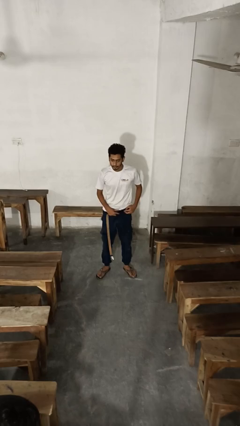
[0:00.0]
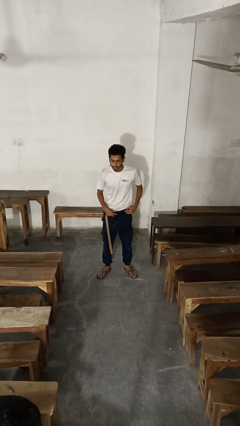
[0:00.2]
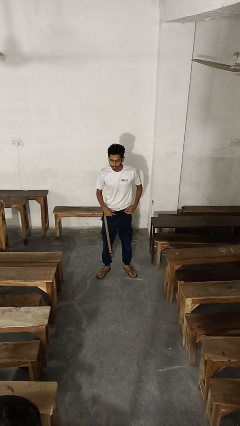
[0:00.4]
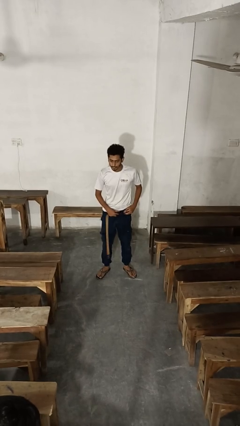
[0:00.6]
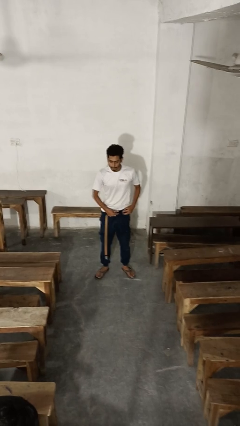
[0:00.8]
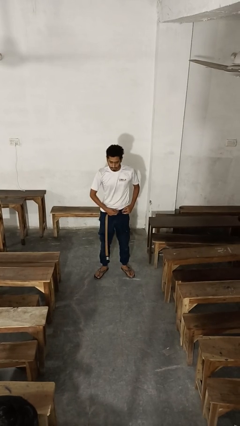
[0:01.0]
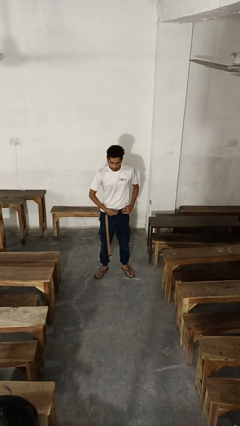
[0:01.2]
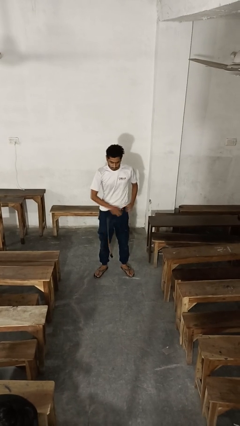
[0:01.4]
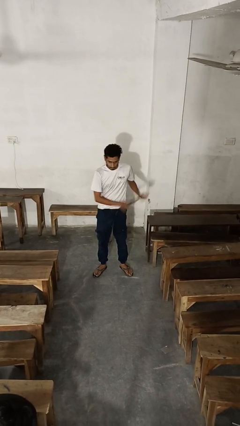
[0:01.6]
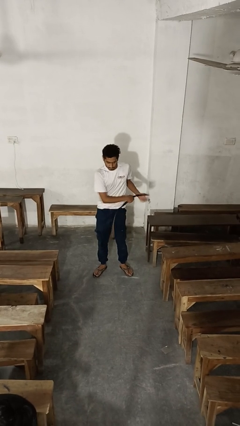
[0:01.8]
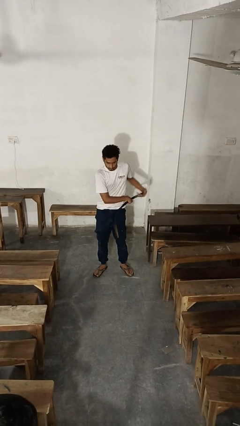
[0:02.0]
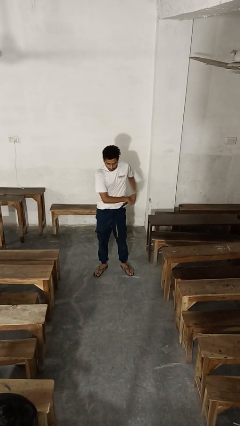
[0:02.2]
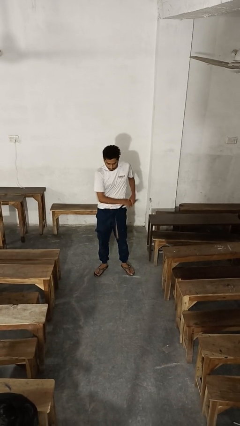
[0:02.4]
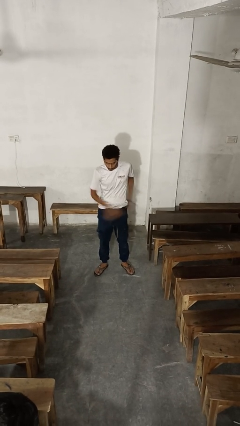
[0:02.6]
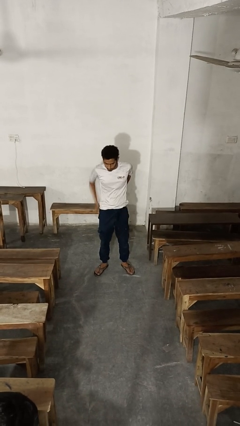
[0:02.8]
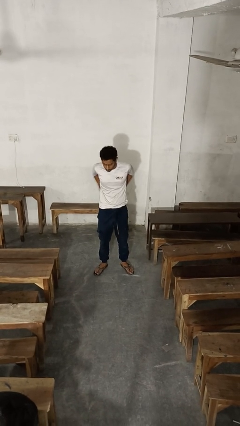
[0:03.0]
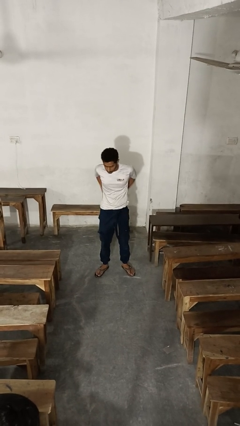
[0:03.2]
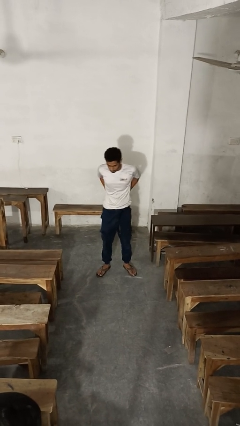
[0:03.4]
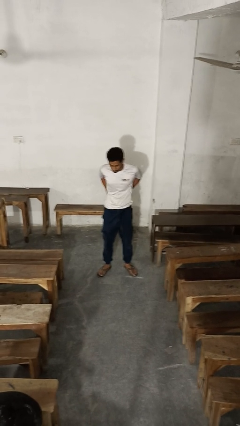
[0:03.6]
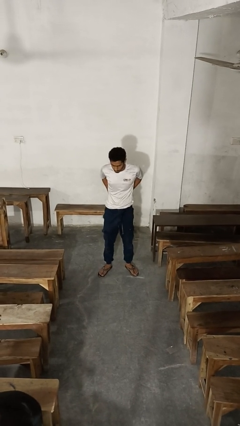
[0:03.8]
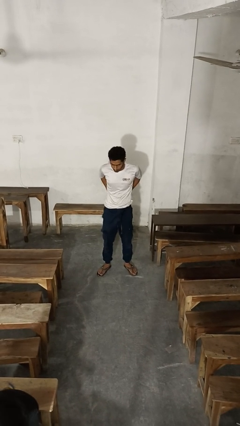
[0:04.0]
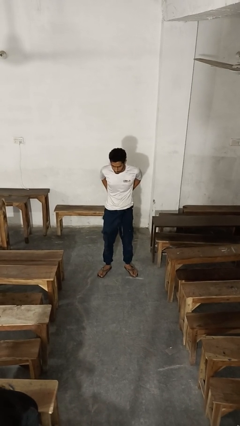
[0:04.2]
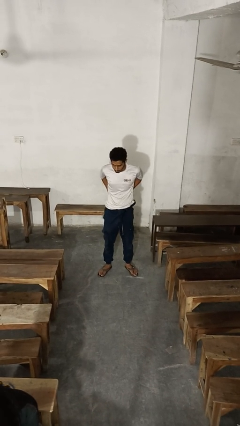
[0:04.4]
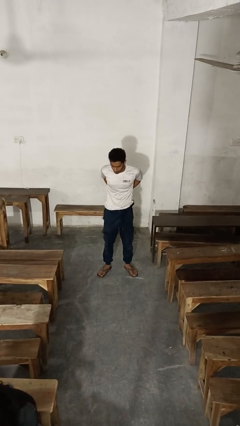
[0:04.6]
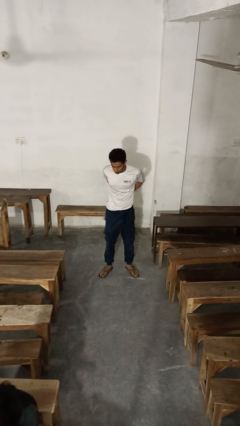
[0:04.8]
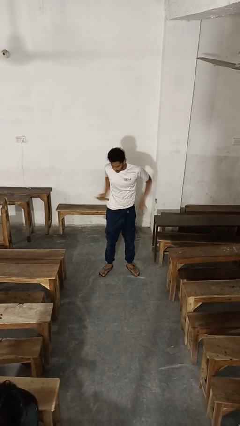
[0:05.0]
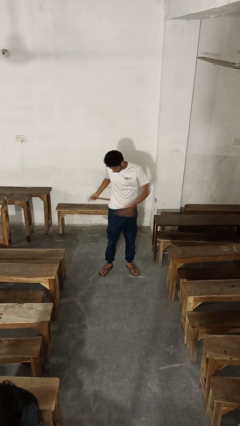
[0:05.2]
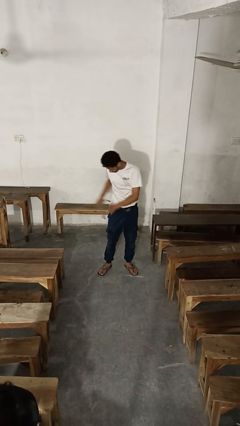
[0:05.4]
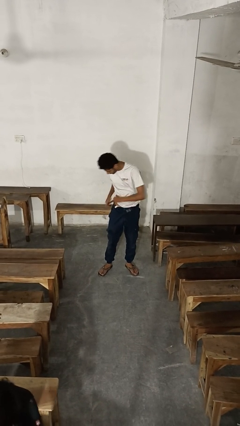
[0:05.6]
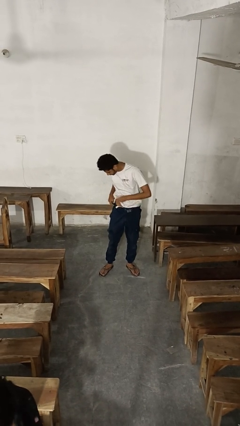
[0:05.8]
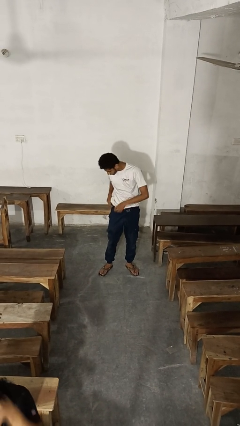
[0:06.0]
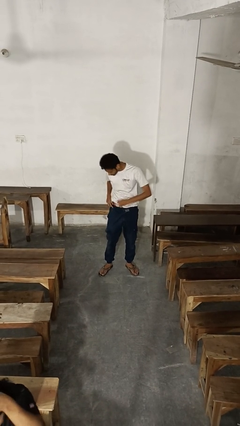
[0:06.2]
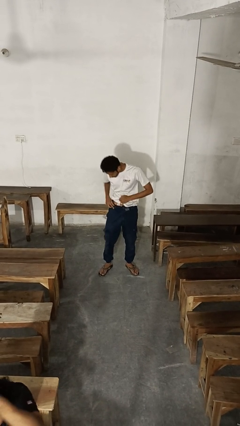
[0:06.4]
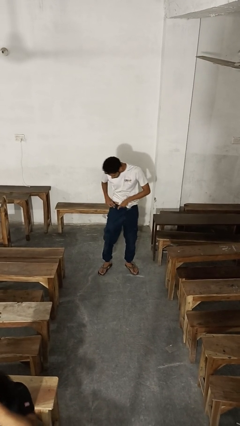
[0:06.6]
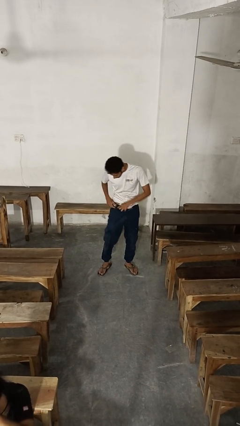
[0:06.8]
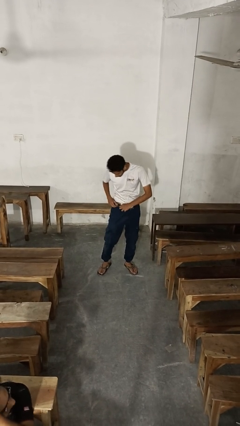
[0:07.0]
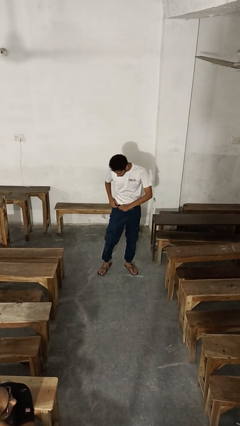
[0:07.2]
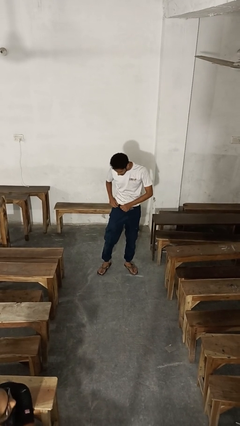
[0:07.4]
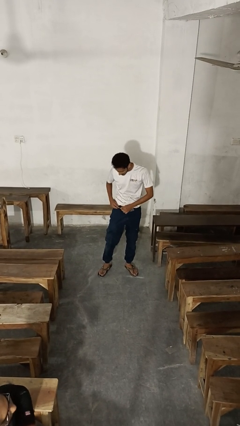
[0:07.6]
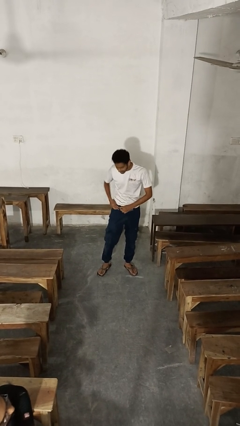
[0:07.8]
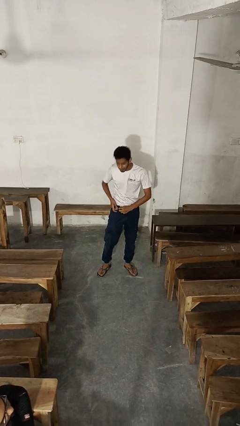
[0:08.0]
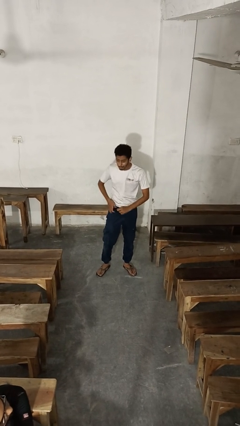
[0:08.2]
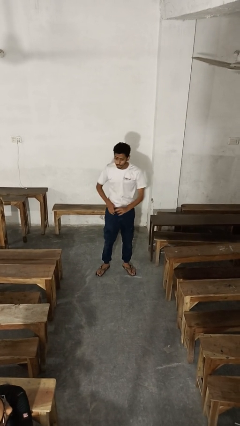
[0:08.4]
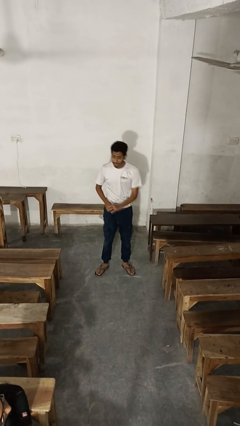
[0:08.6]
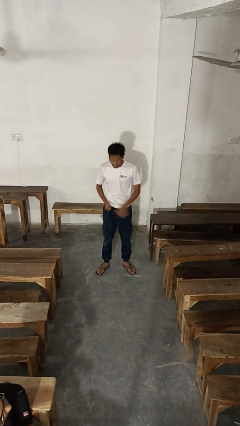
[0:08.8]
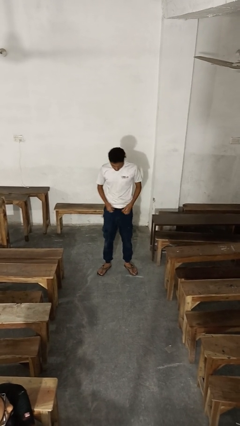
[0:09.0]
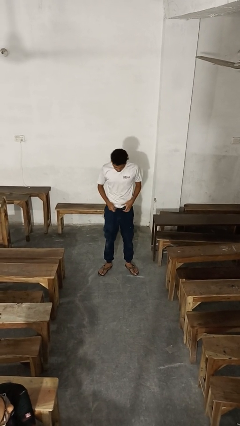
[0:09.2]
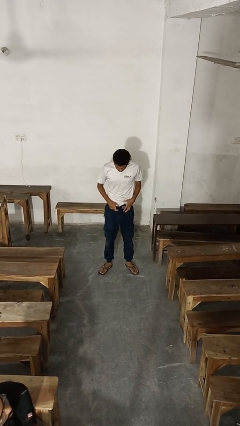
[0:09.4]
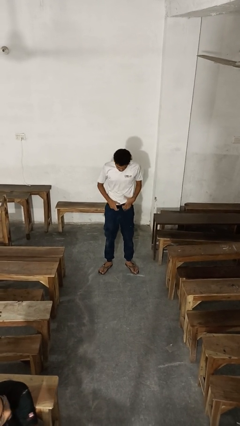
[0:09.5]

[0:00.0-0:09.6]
person puts on belt

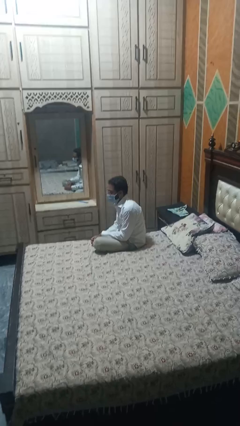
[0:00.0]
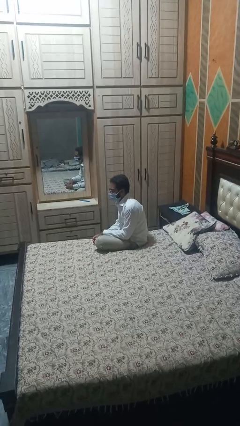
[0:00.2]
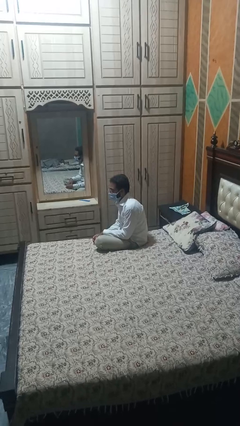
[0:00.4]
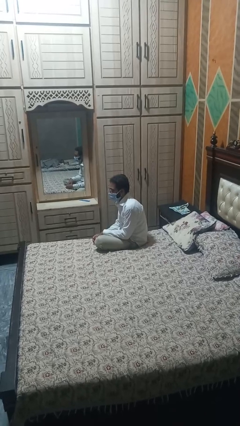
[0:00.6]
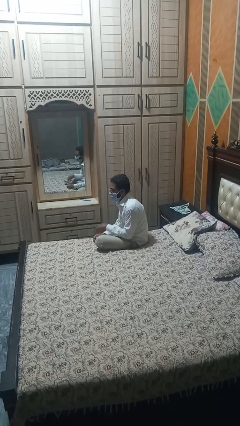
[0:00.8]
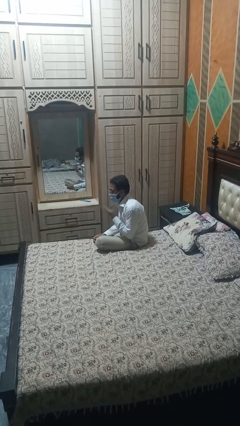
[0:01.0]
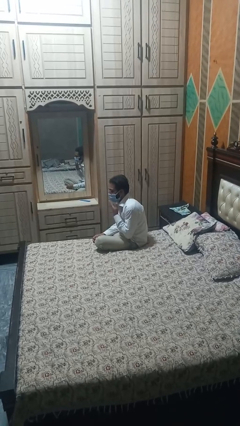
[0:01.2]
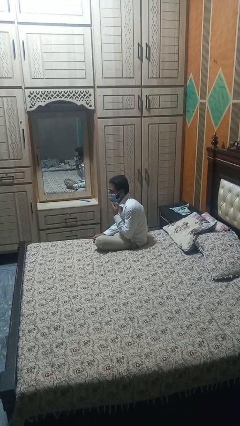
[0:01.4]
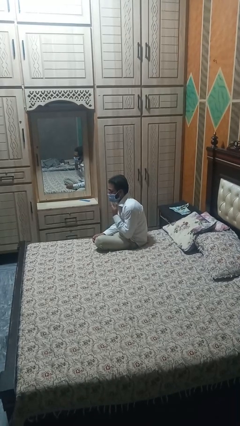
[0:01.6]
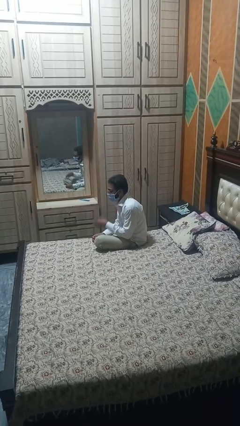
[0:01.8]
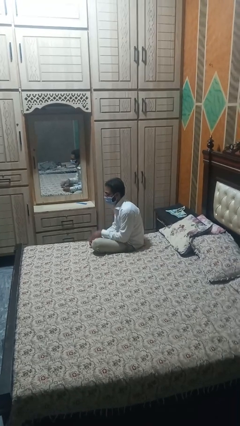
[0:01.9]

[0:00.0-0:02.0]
person strokes chin

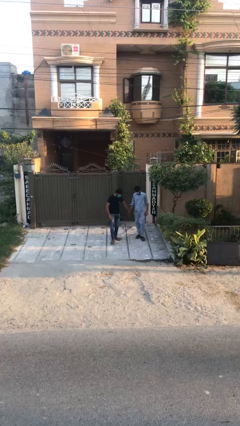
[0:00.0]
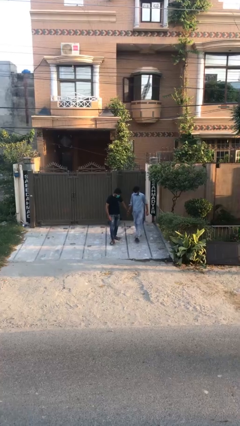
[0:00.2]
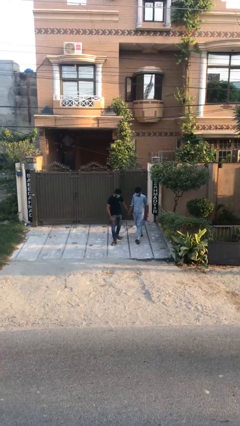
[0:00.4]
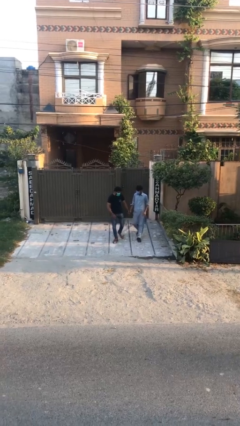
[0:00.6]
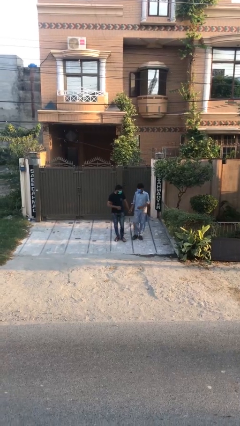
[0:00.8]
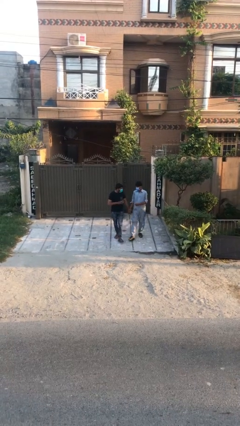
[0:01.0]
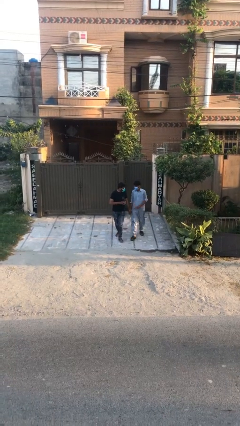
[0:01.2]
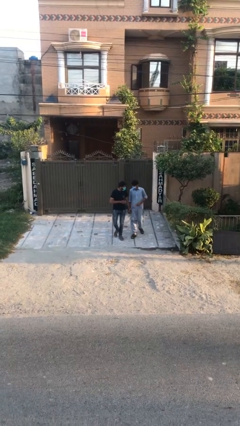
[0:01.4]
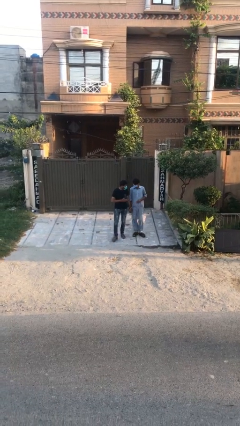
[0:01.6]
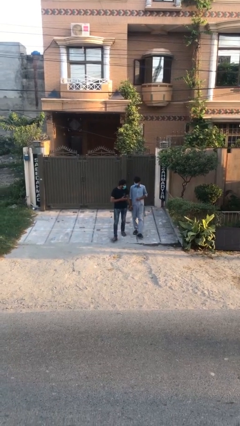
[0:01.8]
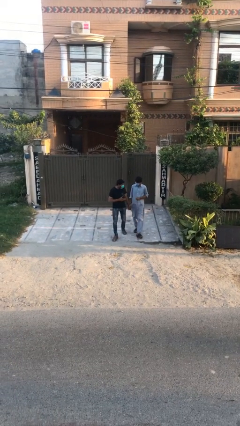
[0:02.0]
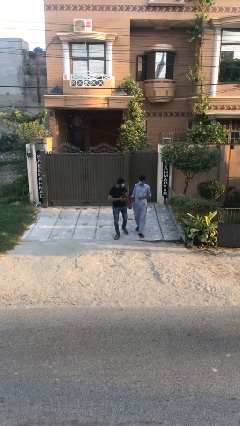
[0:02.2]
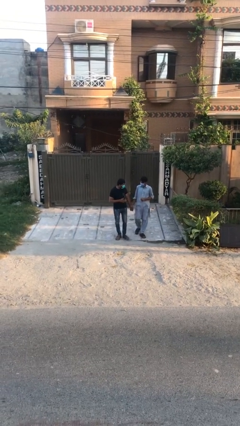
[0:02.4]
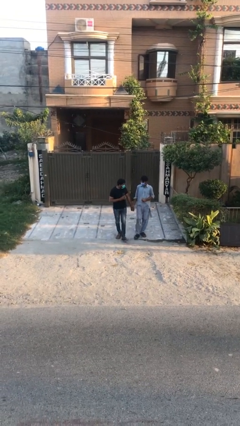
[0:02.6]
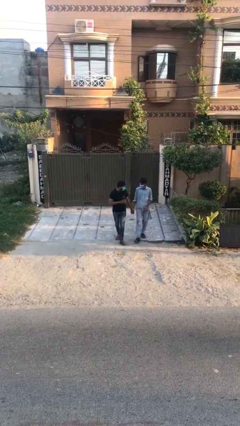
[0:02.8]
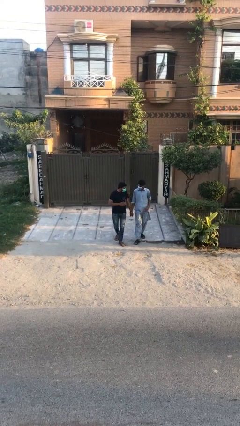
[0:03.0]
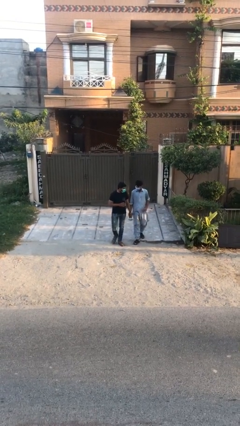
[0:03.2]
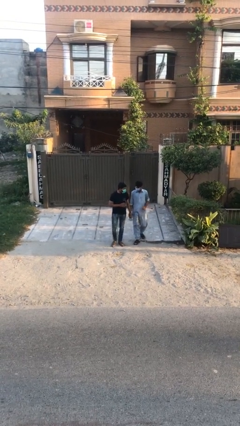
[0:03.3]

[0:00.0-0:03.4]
person holds hand

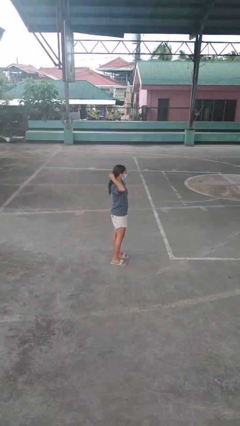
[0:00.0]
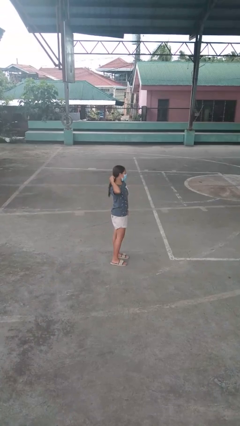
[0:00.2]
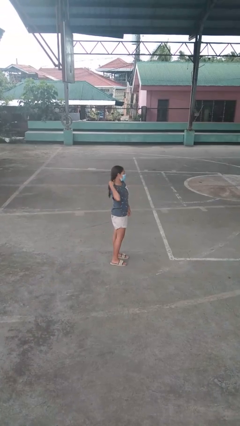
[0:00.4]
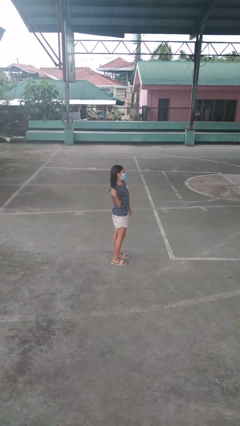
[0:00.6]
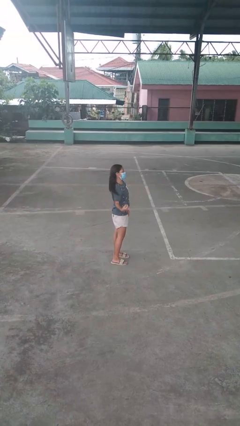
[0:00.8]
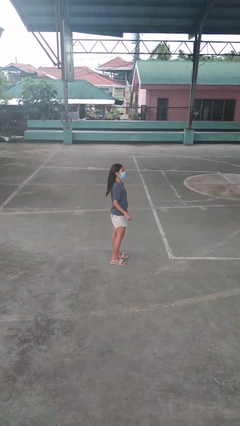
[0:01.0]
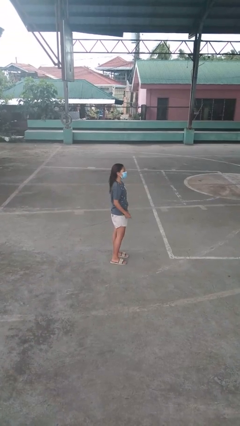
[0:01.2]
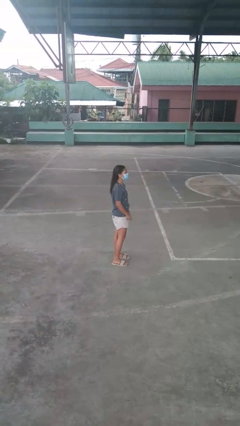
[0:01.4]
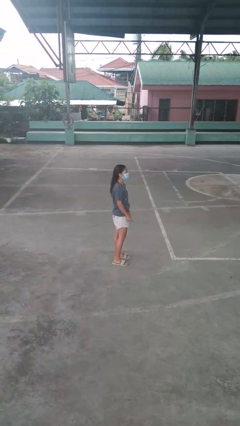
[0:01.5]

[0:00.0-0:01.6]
person takes off hairtie

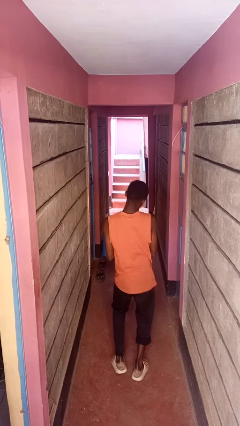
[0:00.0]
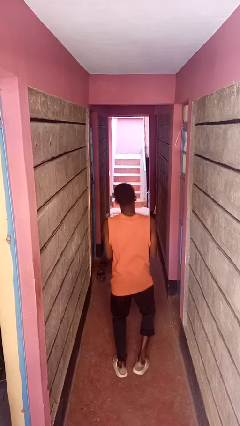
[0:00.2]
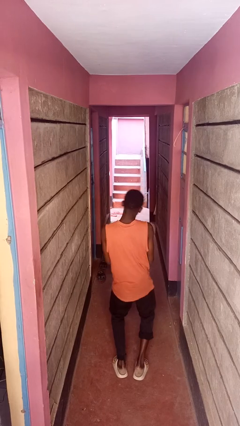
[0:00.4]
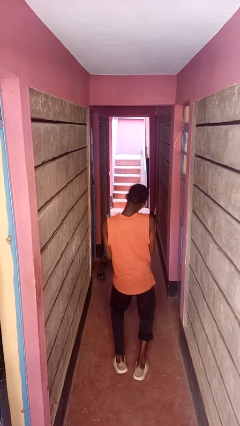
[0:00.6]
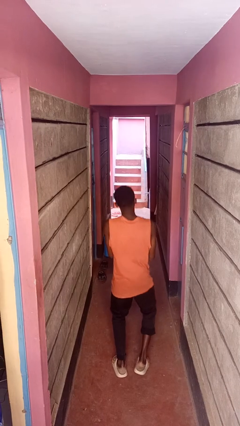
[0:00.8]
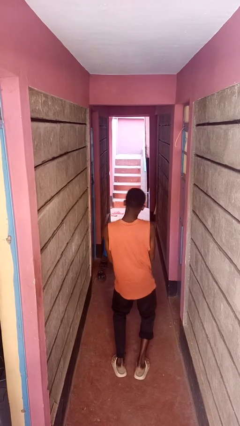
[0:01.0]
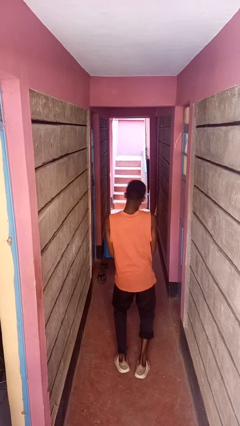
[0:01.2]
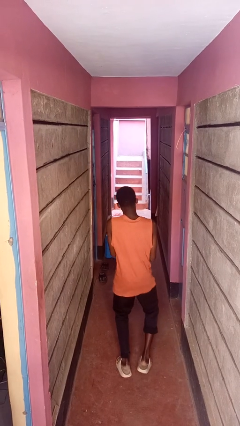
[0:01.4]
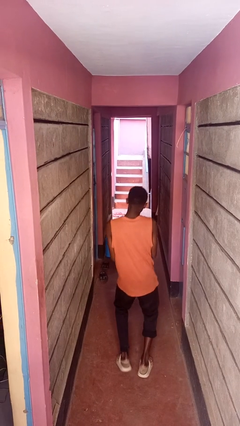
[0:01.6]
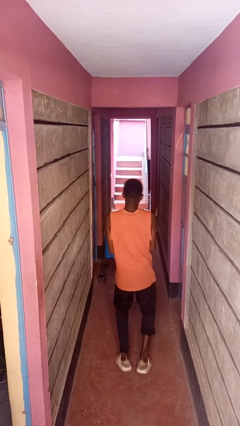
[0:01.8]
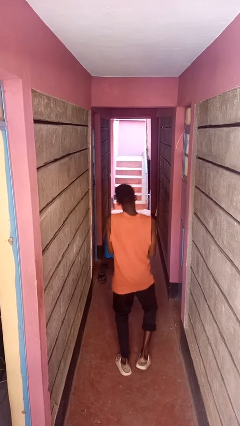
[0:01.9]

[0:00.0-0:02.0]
person dances in place
